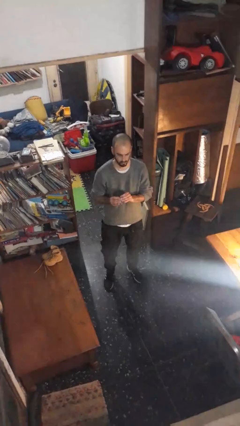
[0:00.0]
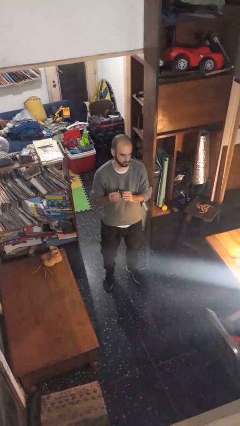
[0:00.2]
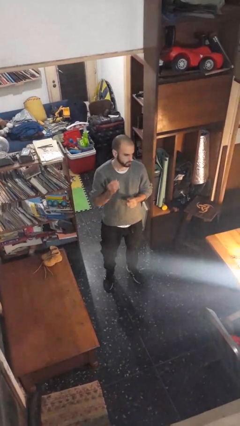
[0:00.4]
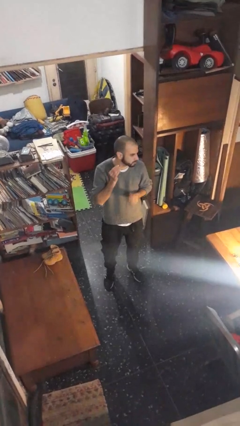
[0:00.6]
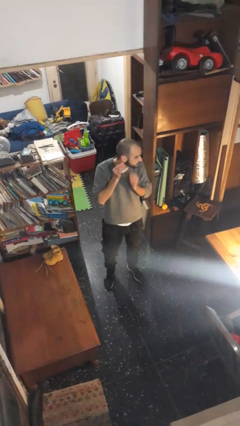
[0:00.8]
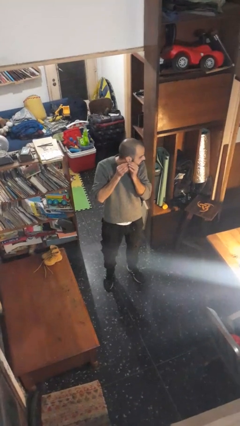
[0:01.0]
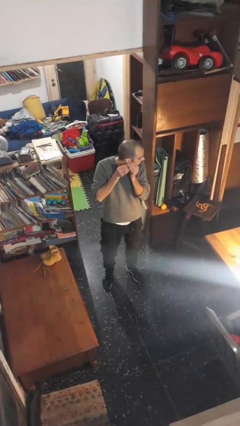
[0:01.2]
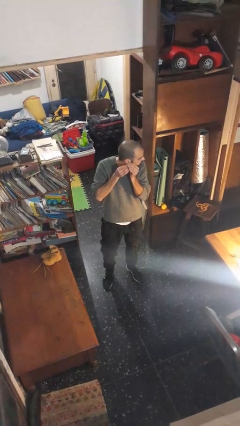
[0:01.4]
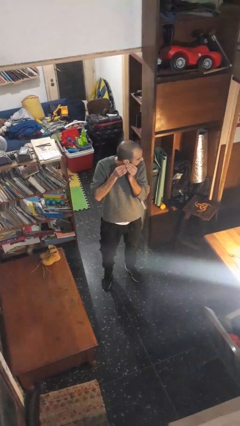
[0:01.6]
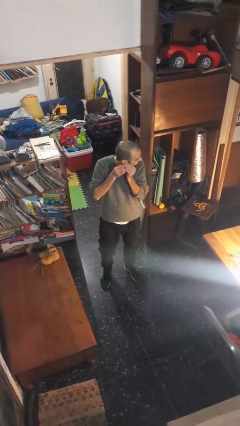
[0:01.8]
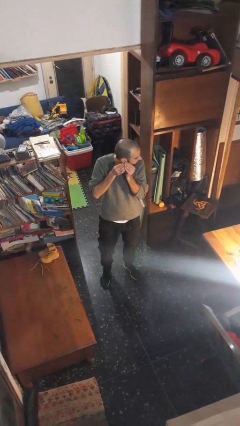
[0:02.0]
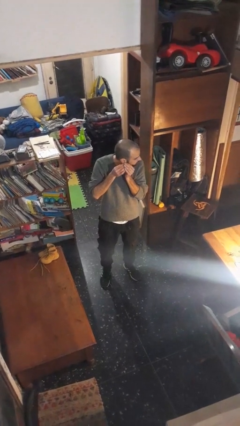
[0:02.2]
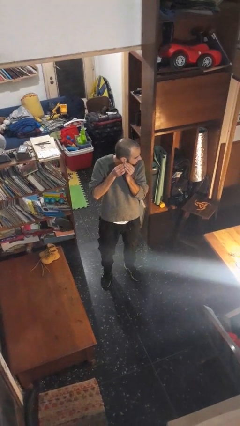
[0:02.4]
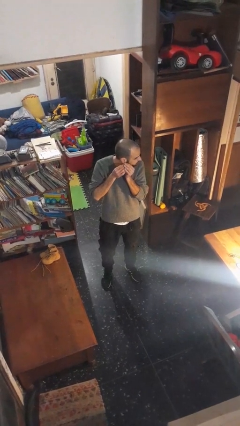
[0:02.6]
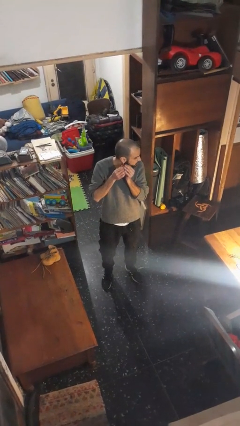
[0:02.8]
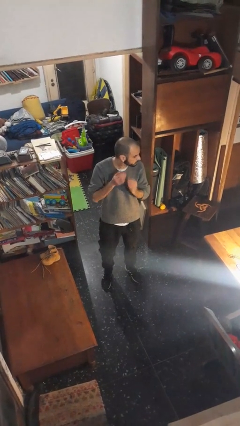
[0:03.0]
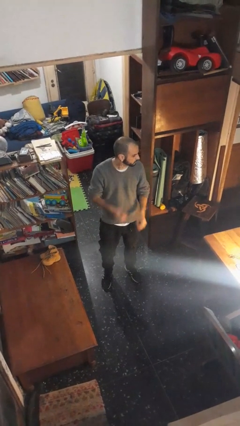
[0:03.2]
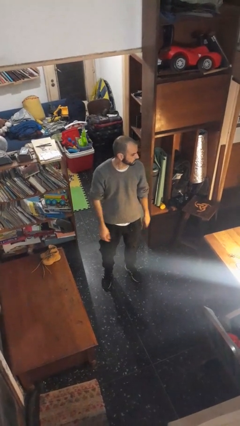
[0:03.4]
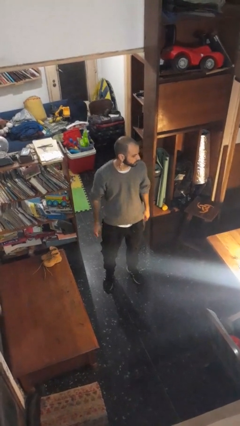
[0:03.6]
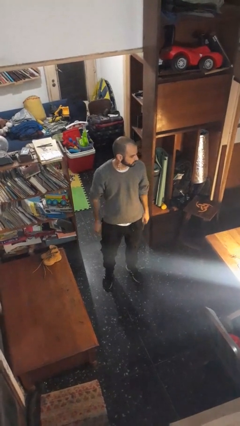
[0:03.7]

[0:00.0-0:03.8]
person puts on earrings

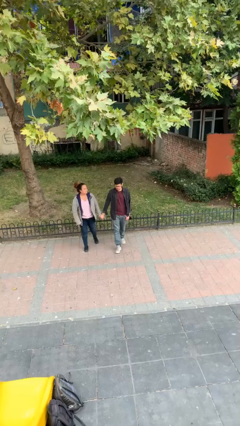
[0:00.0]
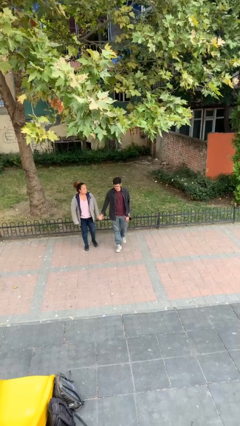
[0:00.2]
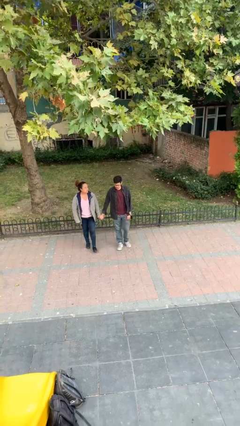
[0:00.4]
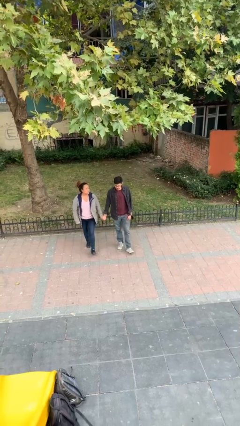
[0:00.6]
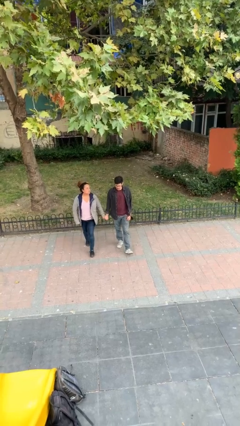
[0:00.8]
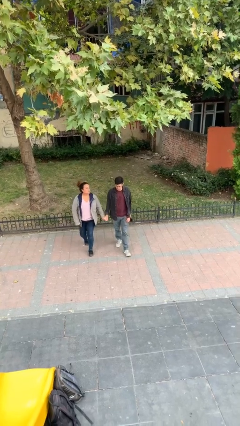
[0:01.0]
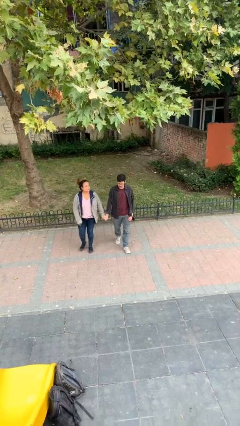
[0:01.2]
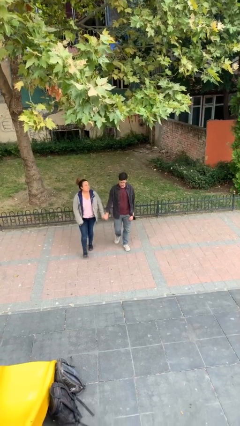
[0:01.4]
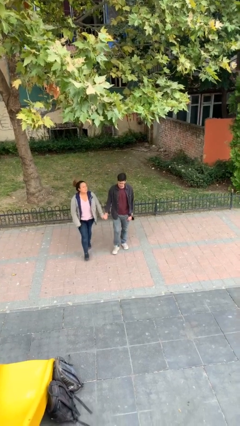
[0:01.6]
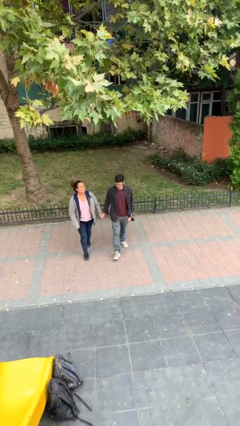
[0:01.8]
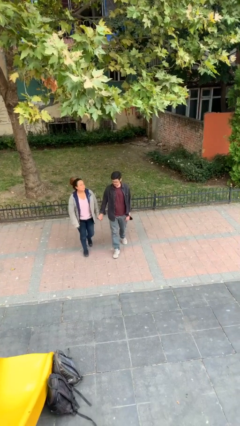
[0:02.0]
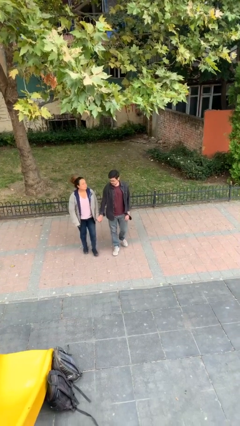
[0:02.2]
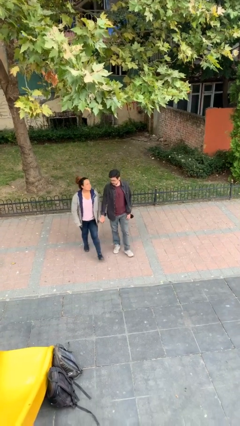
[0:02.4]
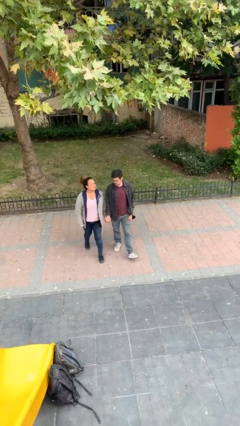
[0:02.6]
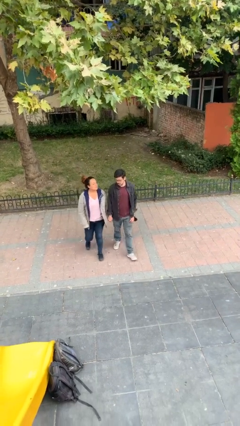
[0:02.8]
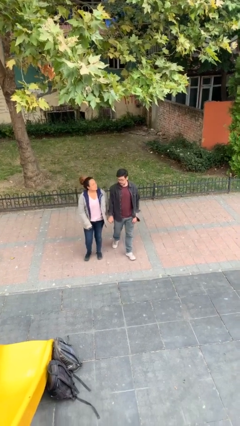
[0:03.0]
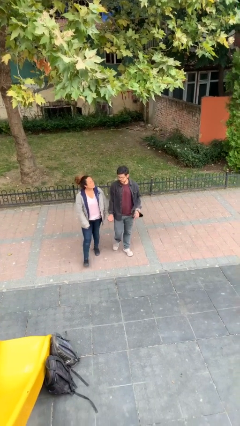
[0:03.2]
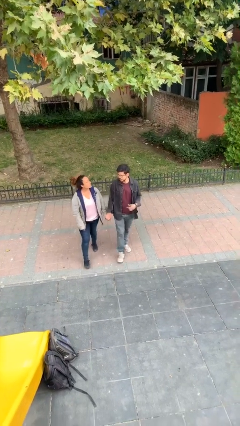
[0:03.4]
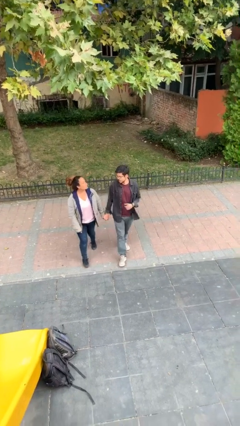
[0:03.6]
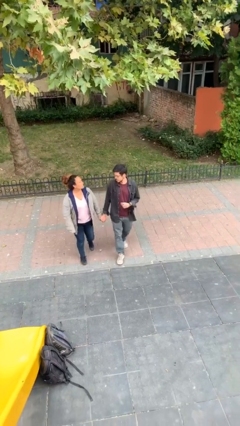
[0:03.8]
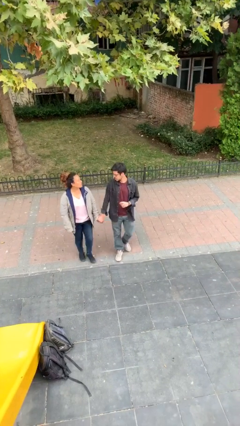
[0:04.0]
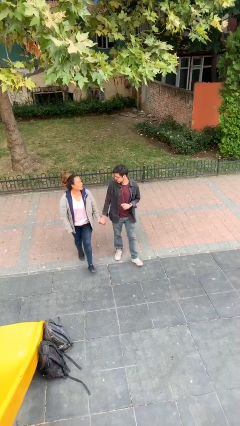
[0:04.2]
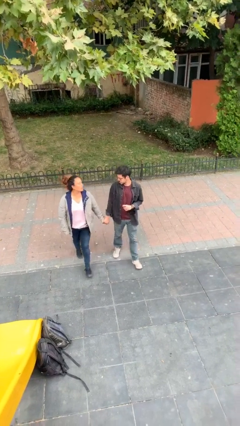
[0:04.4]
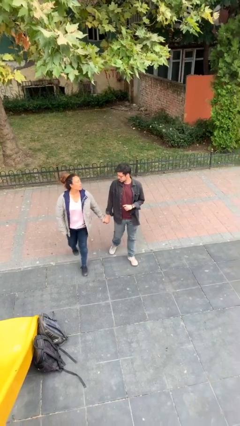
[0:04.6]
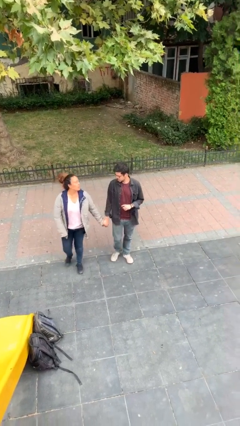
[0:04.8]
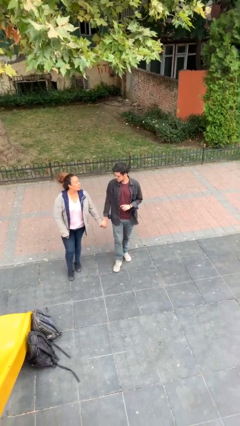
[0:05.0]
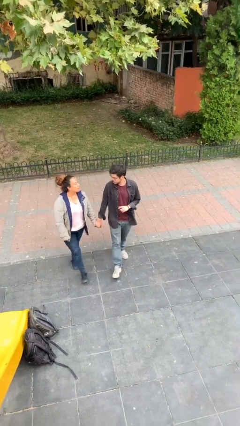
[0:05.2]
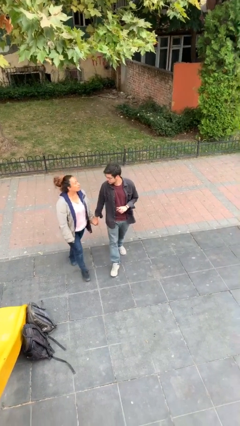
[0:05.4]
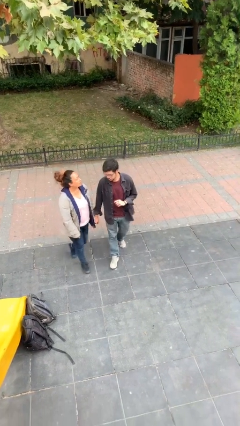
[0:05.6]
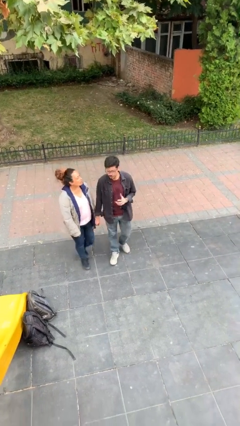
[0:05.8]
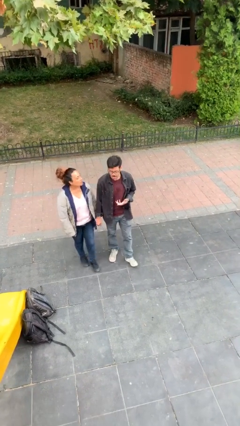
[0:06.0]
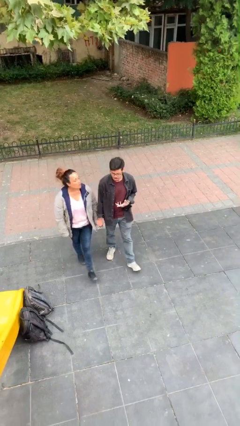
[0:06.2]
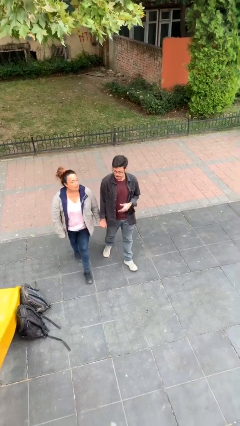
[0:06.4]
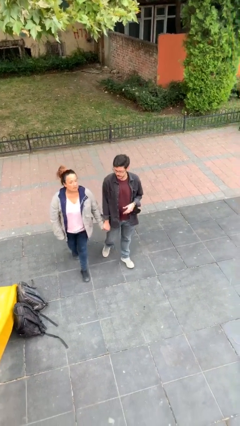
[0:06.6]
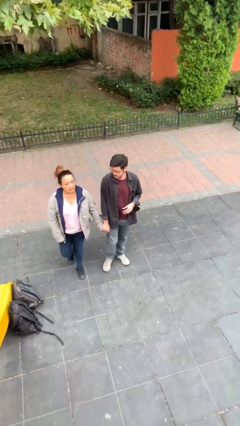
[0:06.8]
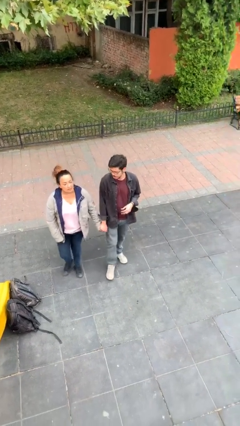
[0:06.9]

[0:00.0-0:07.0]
person holds hand

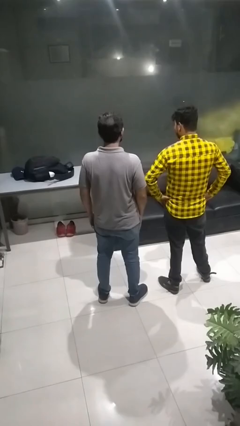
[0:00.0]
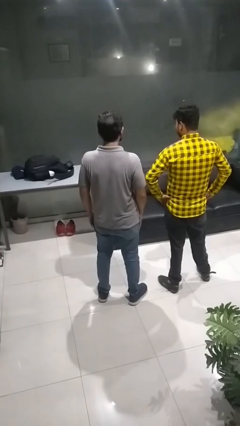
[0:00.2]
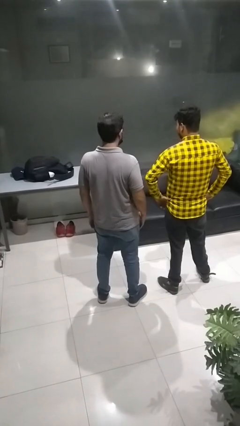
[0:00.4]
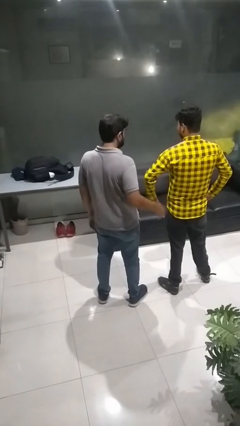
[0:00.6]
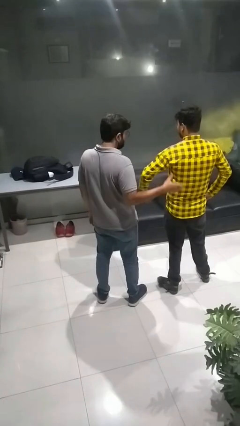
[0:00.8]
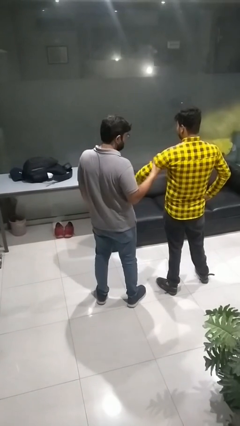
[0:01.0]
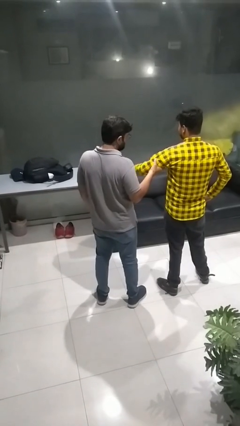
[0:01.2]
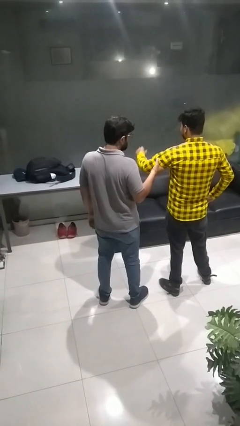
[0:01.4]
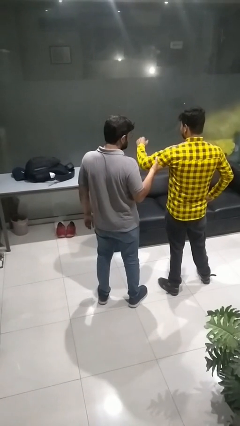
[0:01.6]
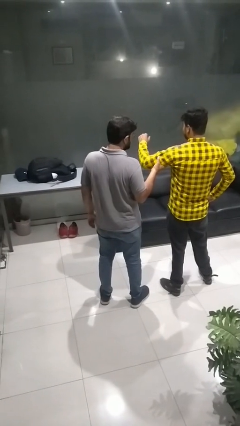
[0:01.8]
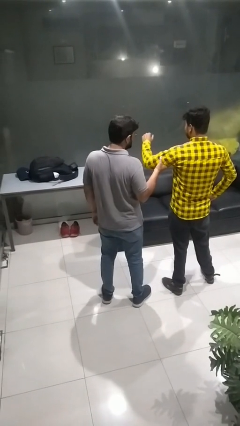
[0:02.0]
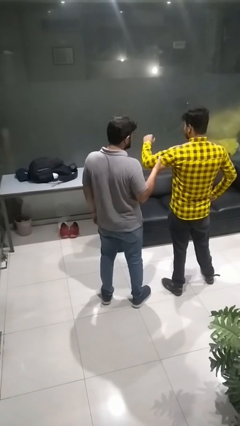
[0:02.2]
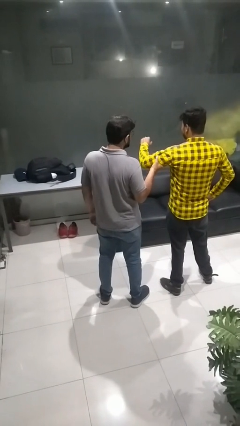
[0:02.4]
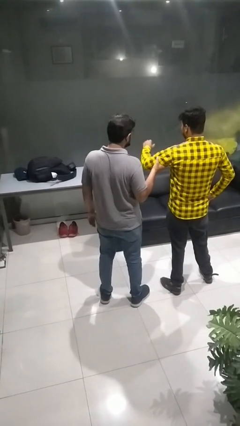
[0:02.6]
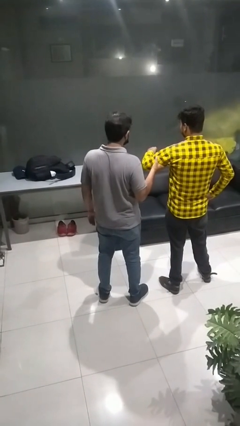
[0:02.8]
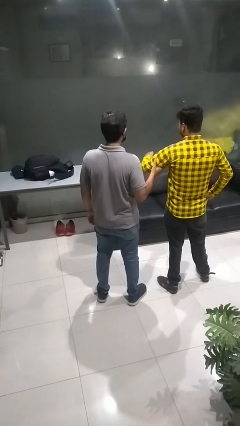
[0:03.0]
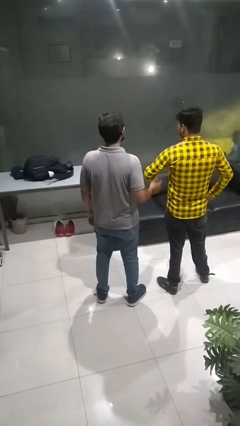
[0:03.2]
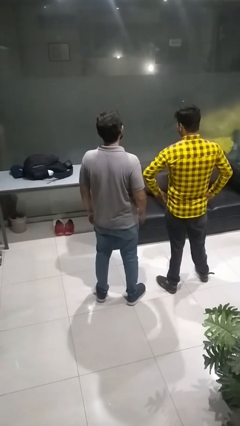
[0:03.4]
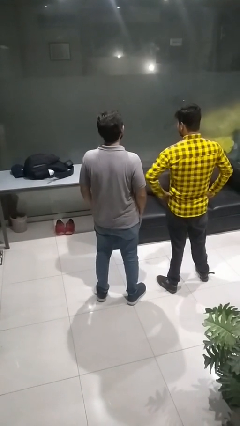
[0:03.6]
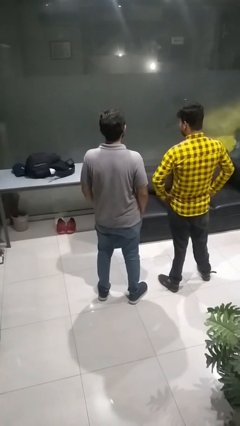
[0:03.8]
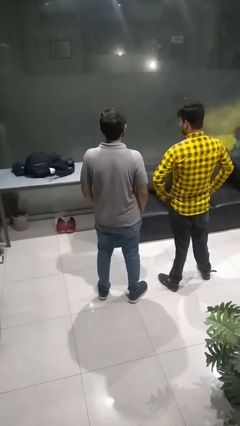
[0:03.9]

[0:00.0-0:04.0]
person grabs person by bicep

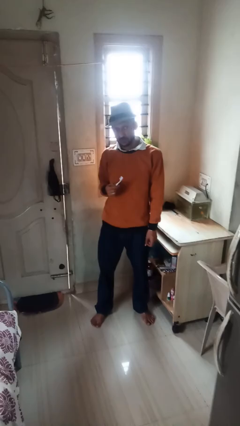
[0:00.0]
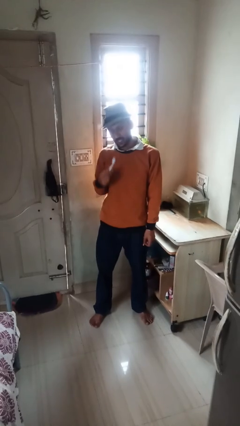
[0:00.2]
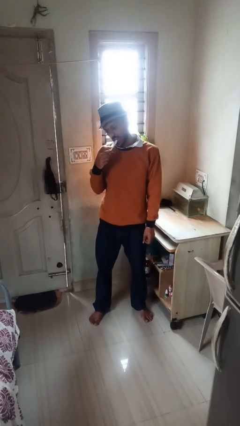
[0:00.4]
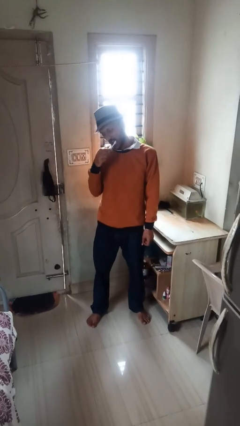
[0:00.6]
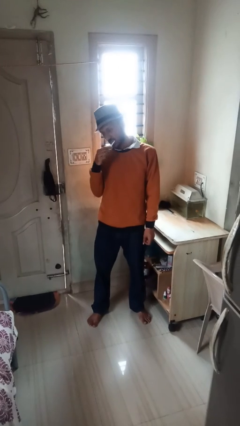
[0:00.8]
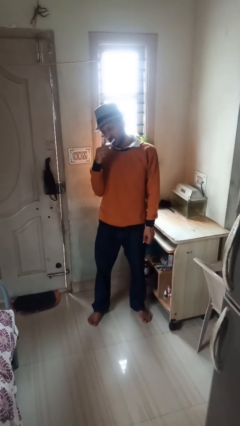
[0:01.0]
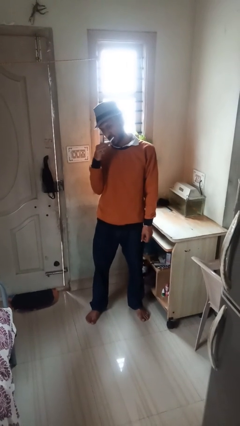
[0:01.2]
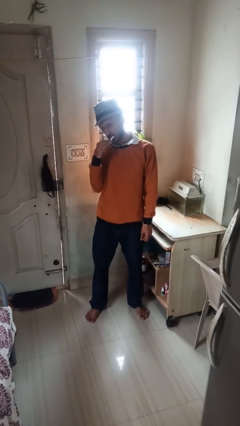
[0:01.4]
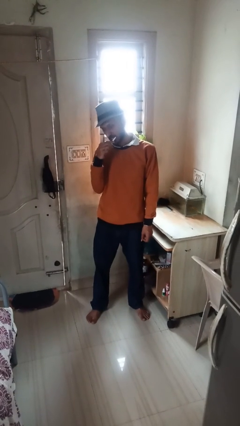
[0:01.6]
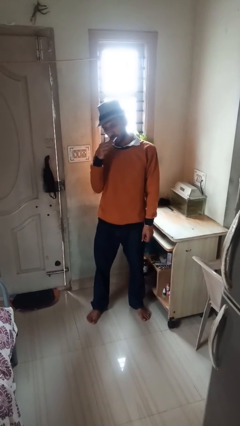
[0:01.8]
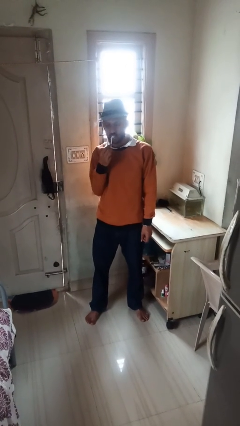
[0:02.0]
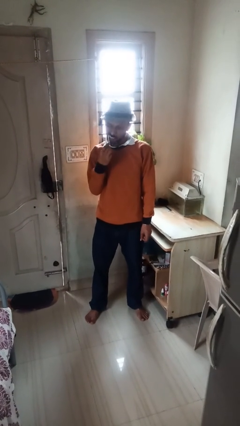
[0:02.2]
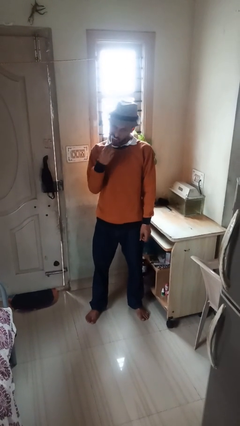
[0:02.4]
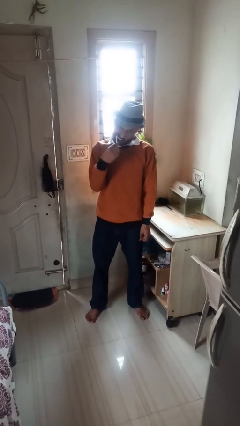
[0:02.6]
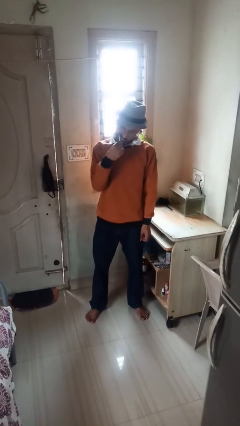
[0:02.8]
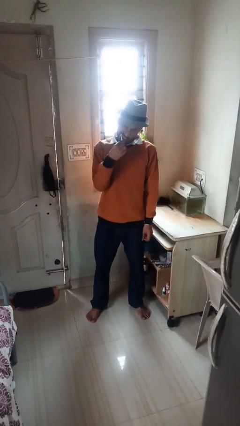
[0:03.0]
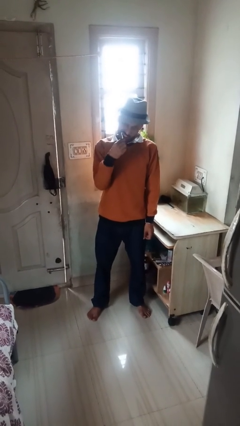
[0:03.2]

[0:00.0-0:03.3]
person brushes teeth
